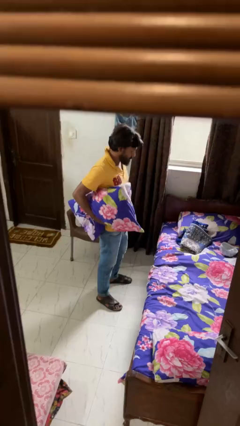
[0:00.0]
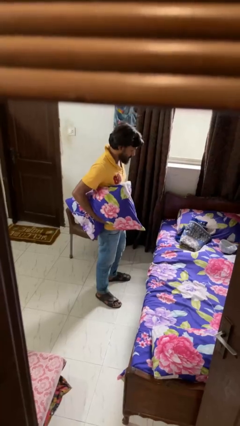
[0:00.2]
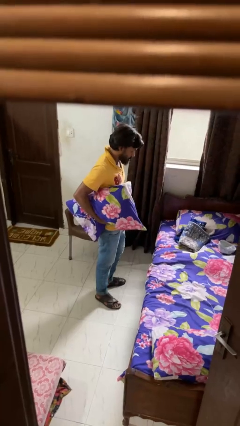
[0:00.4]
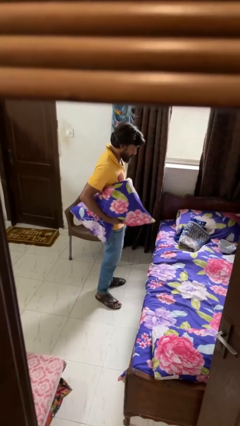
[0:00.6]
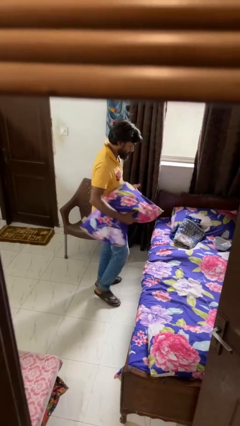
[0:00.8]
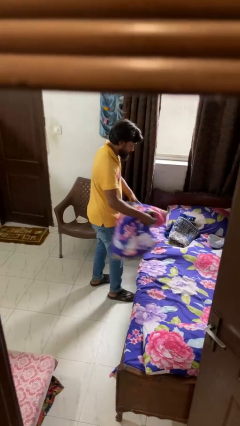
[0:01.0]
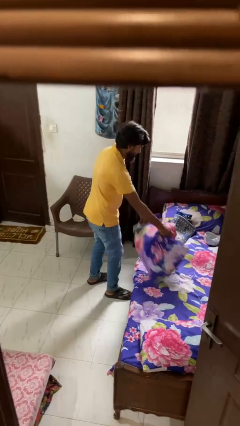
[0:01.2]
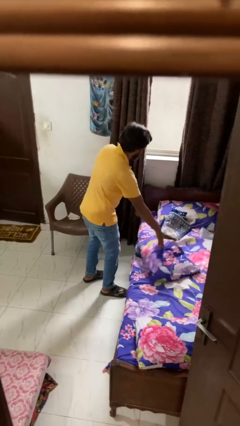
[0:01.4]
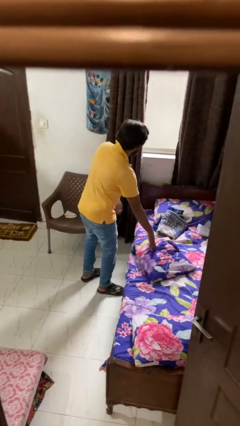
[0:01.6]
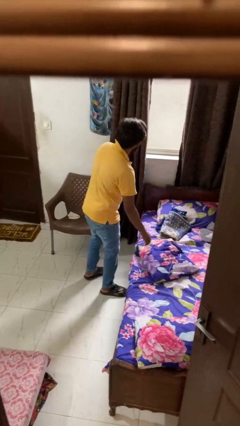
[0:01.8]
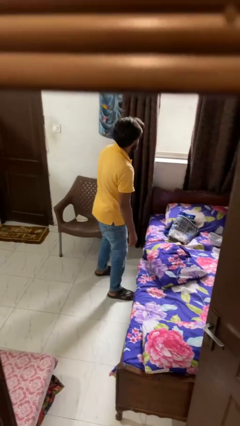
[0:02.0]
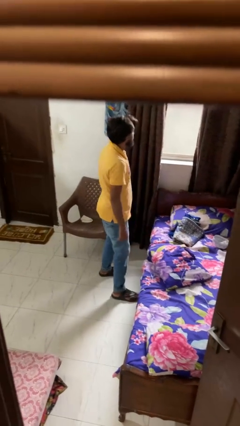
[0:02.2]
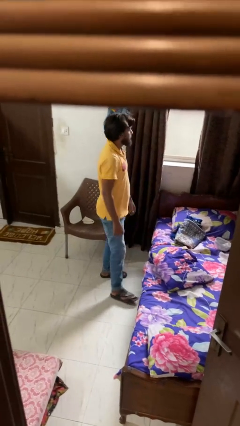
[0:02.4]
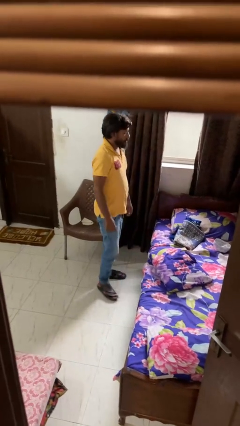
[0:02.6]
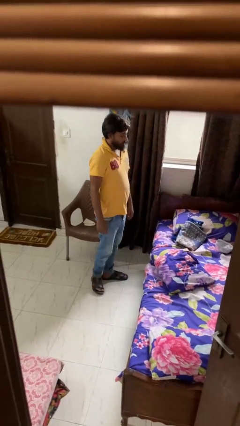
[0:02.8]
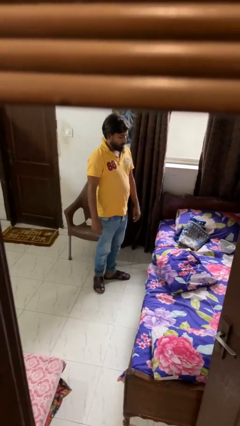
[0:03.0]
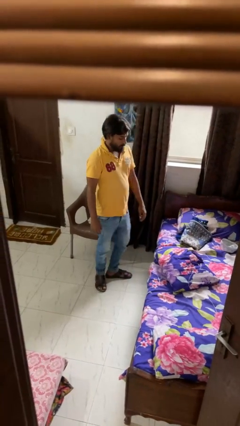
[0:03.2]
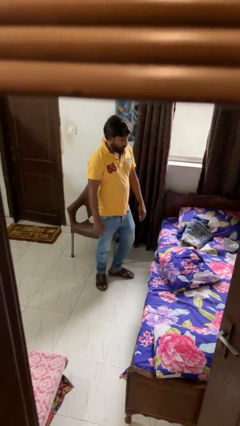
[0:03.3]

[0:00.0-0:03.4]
person puts down object on bed

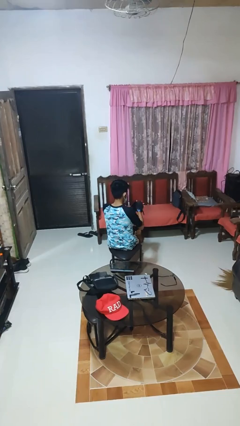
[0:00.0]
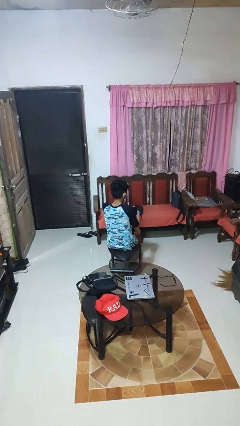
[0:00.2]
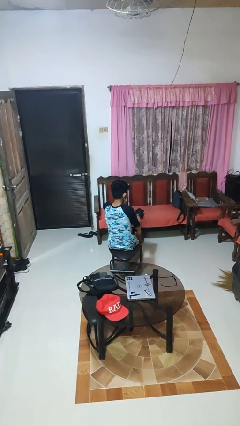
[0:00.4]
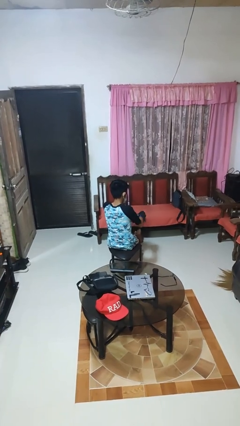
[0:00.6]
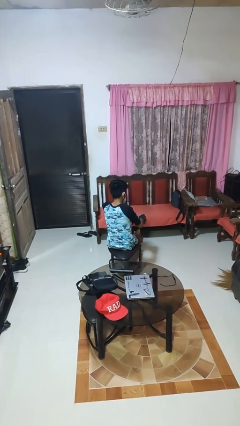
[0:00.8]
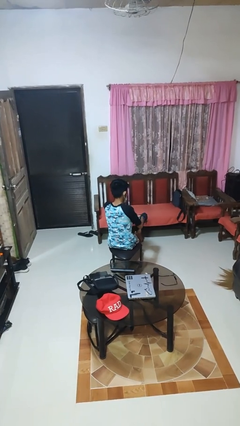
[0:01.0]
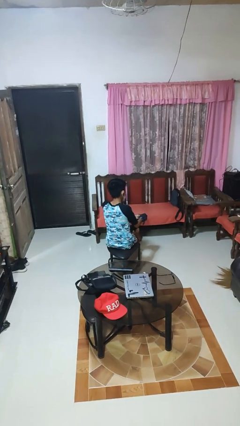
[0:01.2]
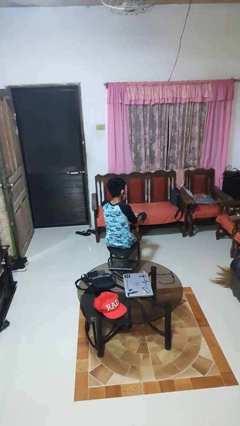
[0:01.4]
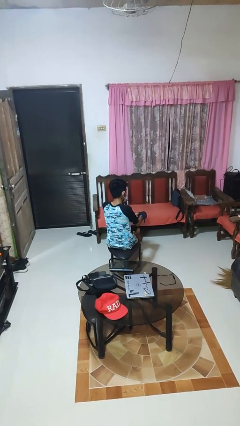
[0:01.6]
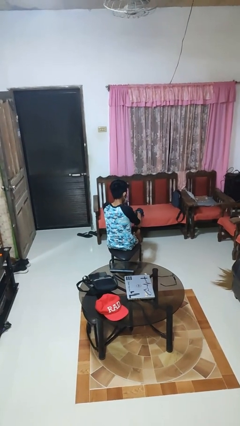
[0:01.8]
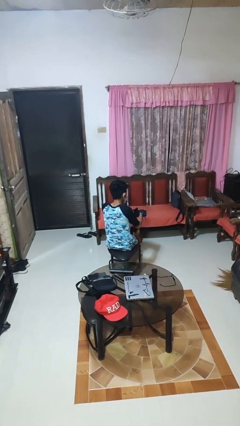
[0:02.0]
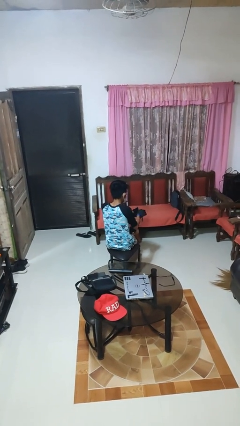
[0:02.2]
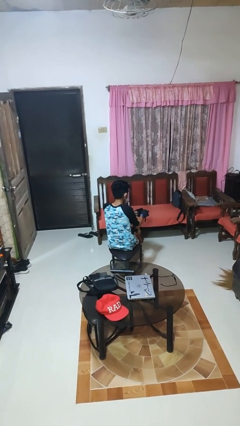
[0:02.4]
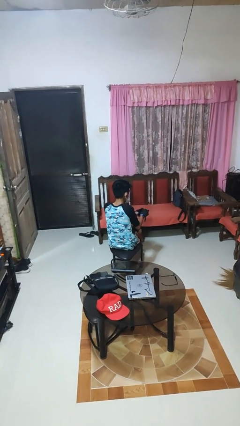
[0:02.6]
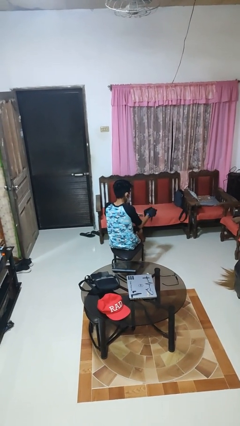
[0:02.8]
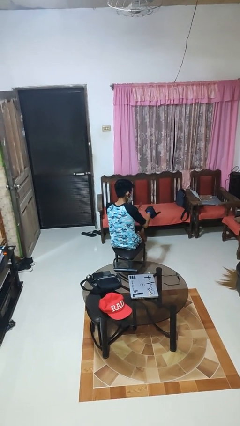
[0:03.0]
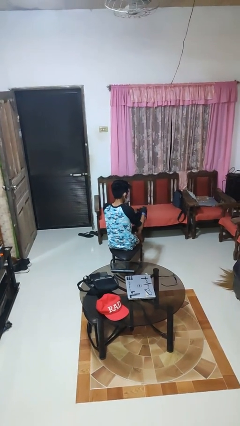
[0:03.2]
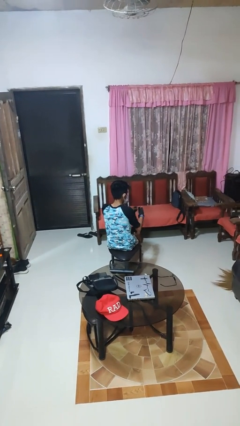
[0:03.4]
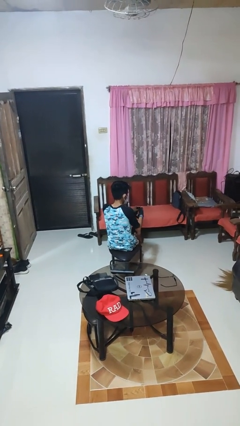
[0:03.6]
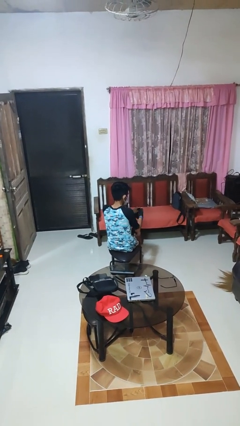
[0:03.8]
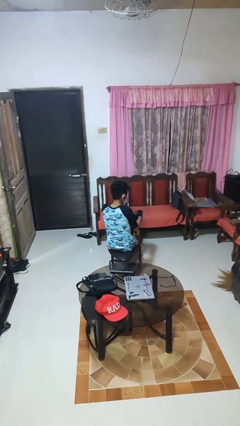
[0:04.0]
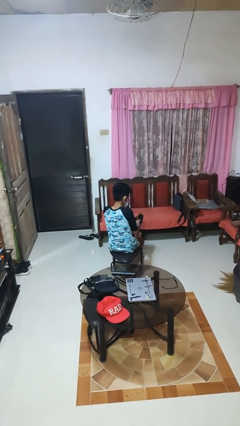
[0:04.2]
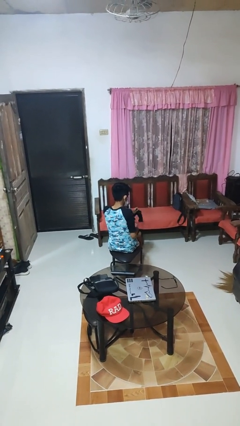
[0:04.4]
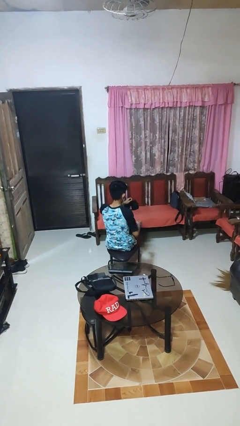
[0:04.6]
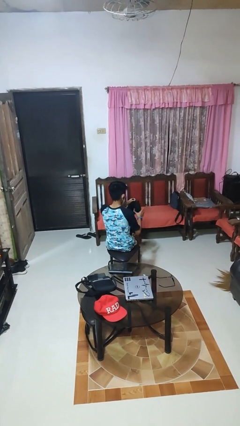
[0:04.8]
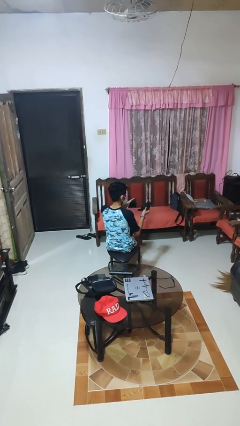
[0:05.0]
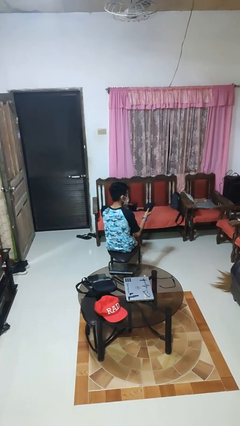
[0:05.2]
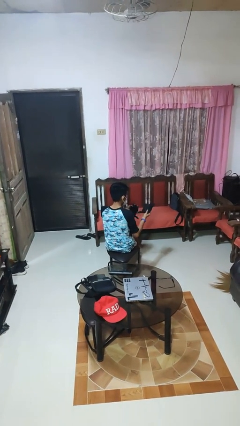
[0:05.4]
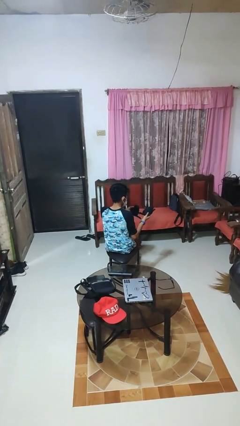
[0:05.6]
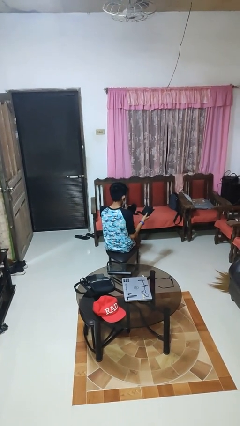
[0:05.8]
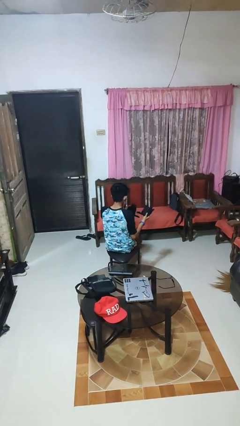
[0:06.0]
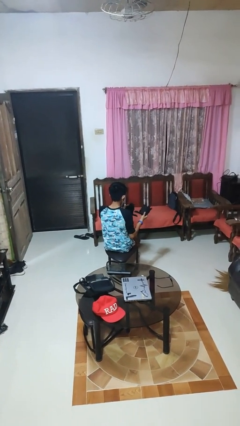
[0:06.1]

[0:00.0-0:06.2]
person takes off gloves

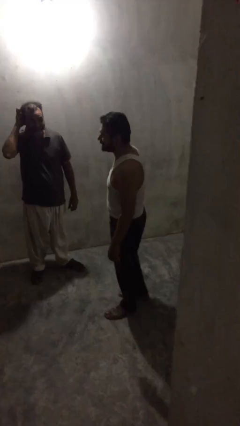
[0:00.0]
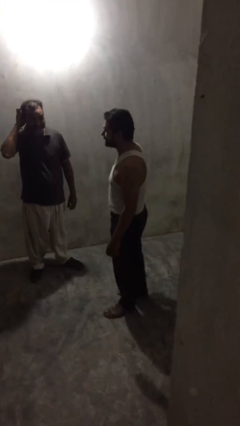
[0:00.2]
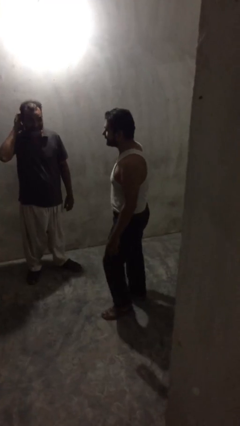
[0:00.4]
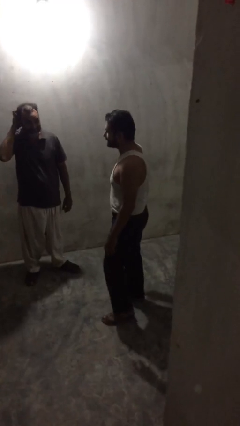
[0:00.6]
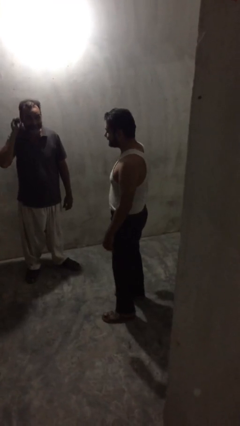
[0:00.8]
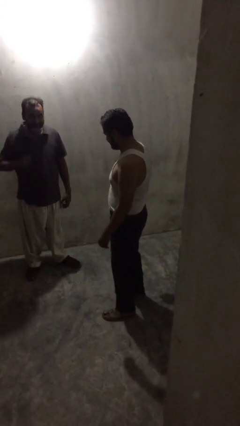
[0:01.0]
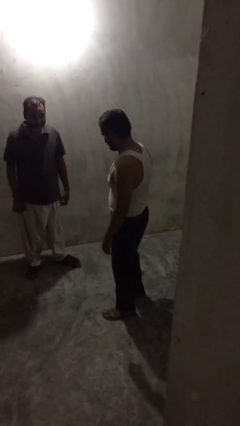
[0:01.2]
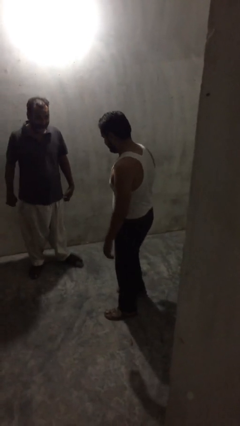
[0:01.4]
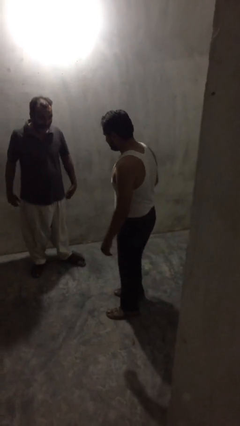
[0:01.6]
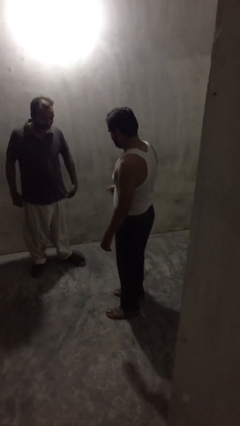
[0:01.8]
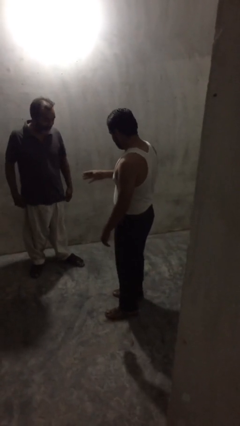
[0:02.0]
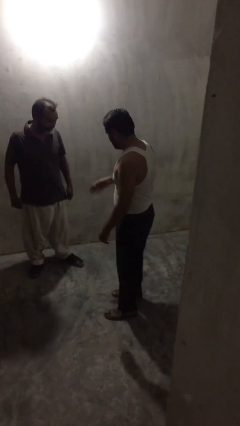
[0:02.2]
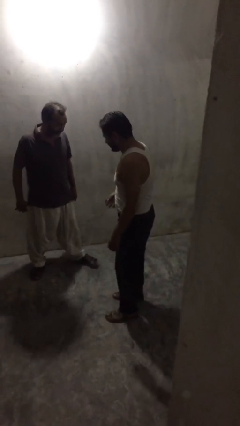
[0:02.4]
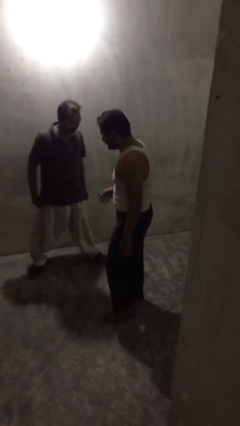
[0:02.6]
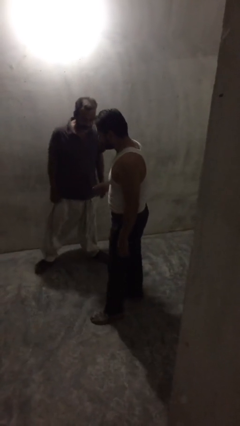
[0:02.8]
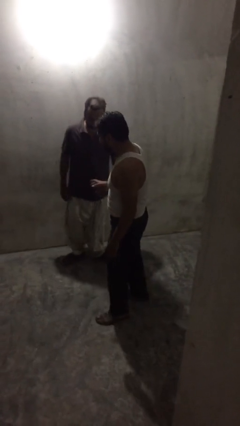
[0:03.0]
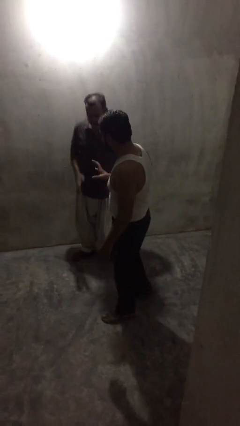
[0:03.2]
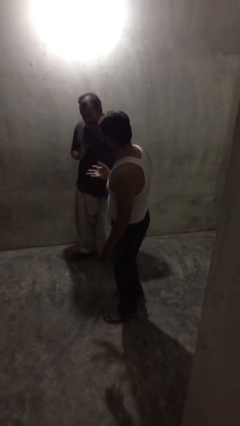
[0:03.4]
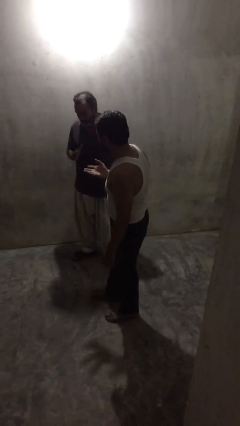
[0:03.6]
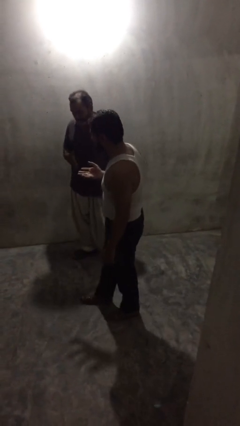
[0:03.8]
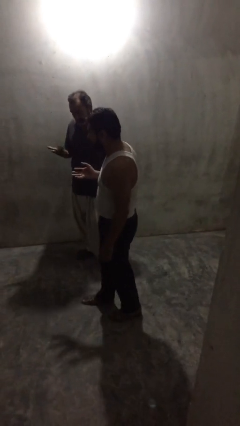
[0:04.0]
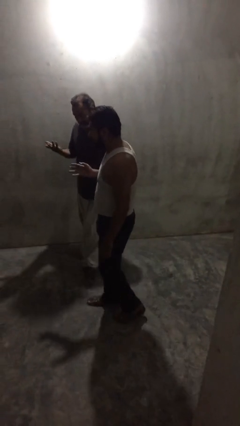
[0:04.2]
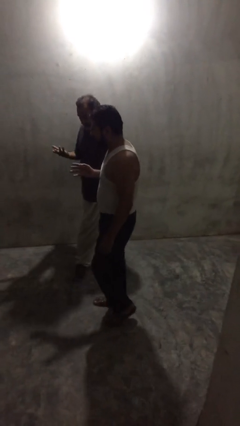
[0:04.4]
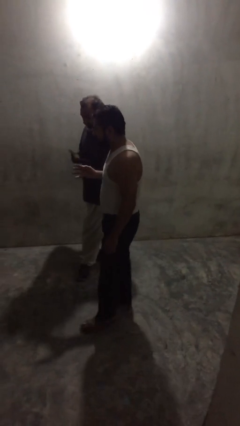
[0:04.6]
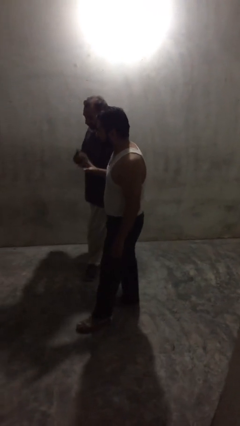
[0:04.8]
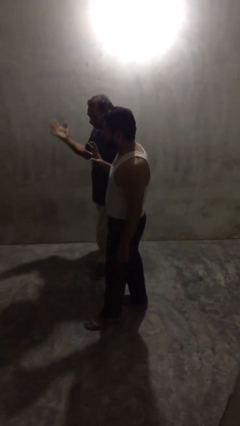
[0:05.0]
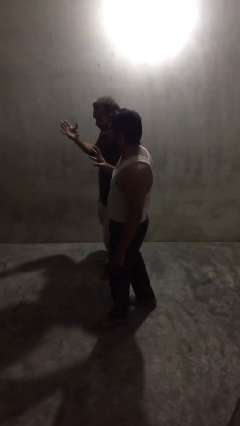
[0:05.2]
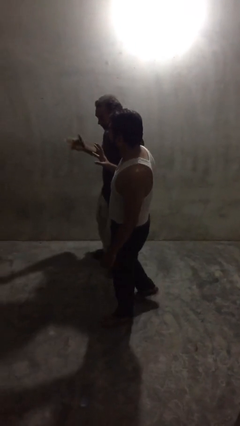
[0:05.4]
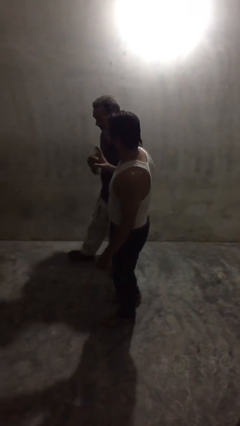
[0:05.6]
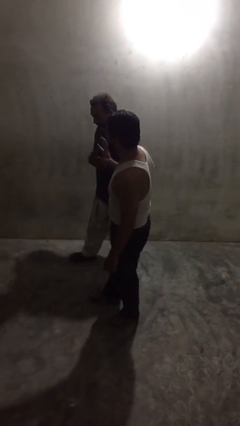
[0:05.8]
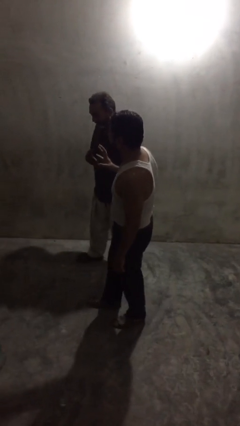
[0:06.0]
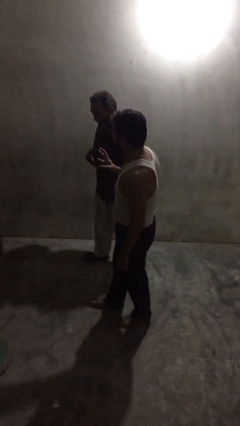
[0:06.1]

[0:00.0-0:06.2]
person talks to person

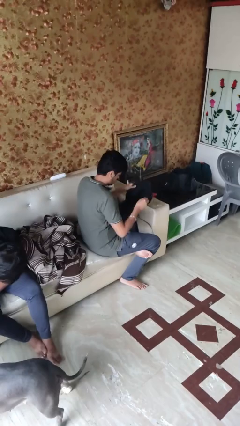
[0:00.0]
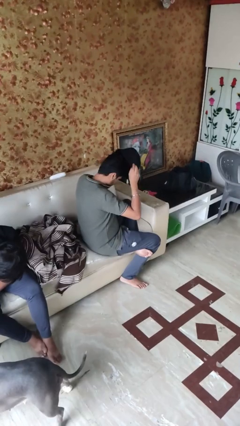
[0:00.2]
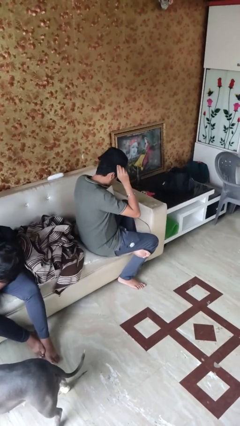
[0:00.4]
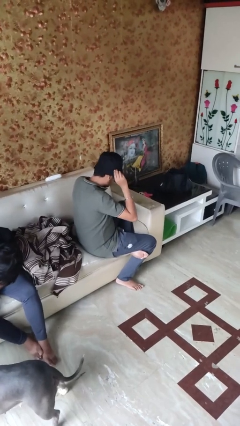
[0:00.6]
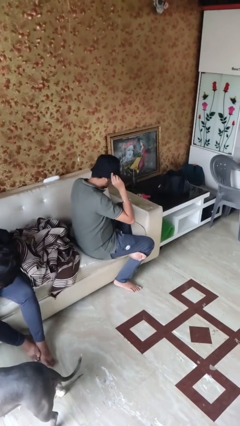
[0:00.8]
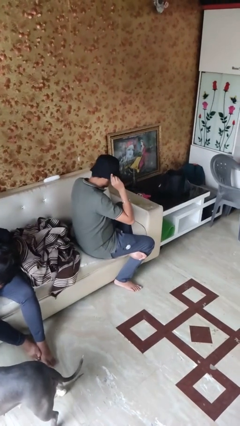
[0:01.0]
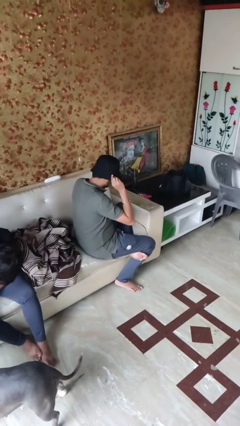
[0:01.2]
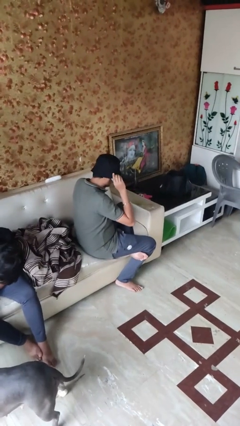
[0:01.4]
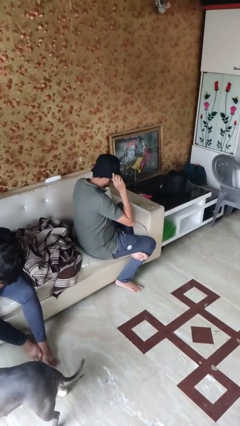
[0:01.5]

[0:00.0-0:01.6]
person puts on hat

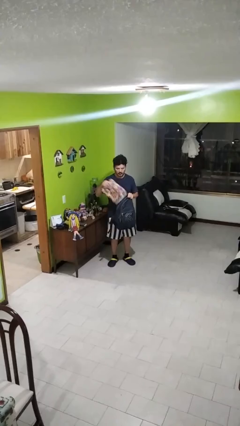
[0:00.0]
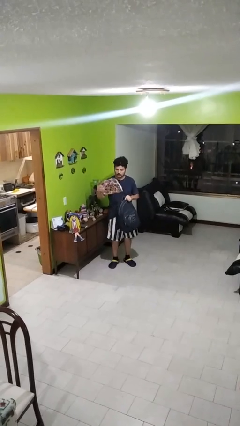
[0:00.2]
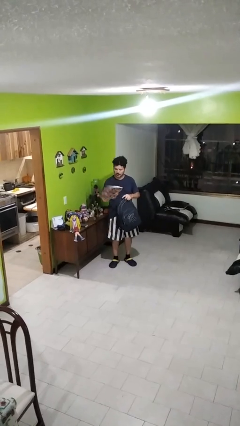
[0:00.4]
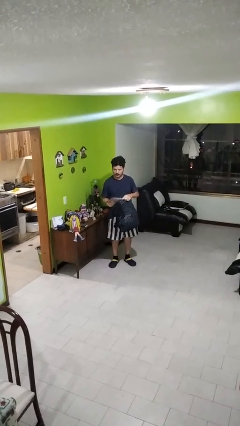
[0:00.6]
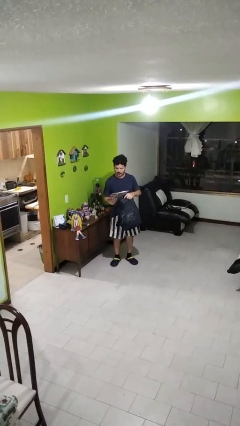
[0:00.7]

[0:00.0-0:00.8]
person takes object from backpack
